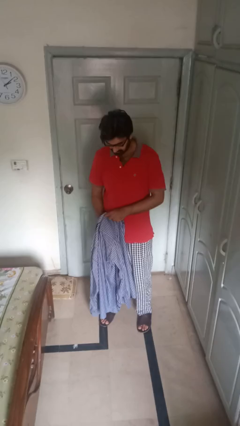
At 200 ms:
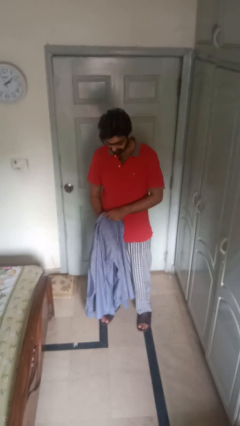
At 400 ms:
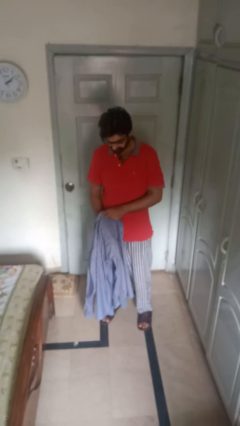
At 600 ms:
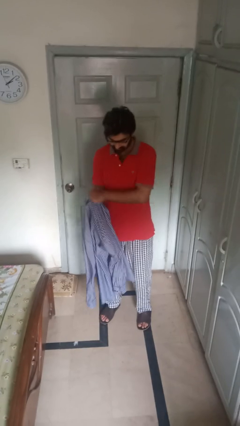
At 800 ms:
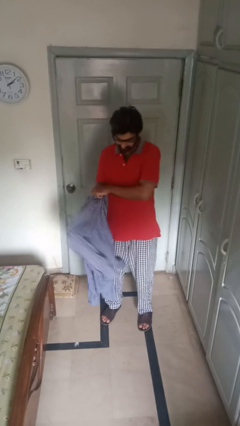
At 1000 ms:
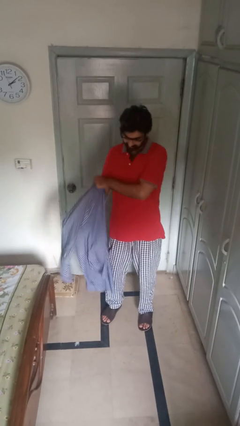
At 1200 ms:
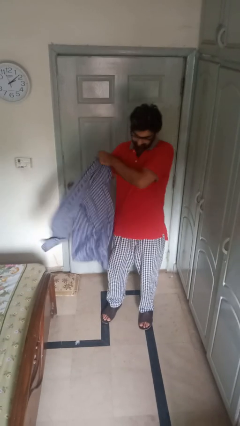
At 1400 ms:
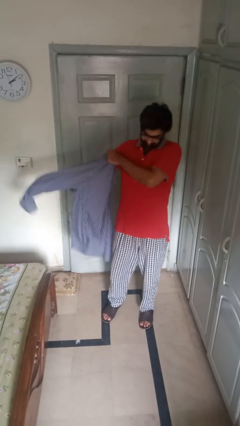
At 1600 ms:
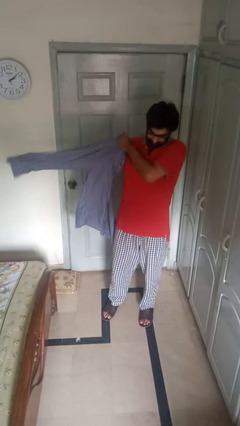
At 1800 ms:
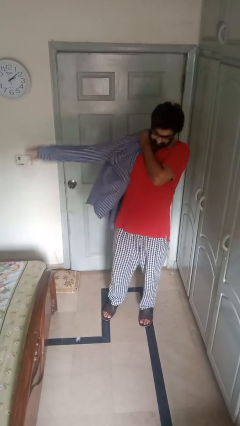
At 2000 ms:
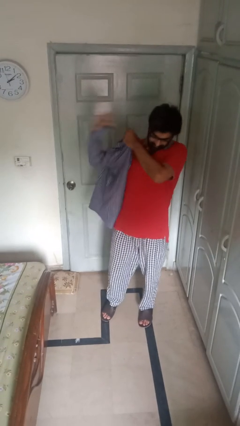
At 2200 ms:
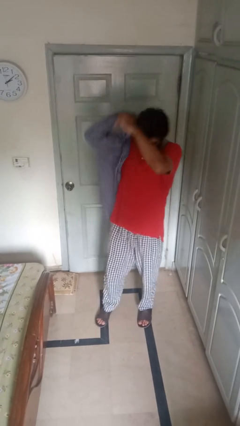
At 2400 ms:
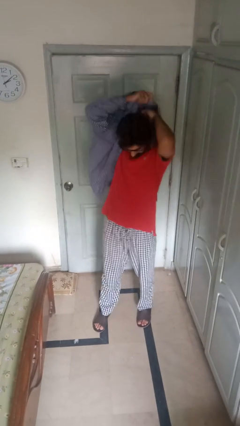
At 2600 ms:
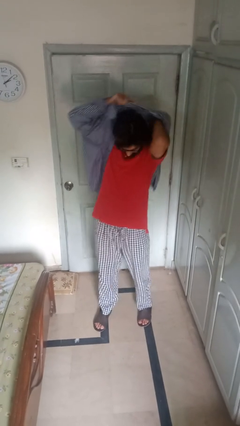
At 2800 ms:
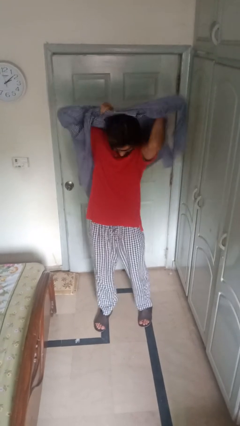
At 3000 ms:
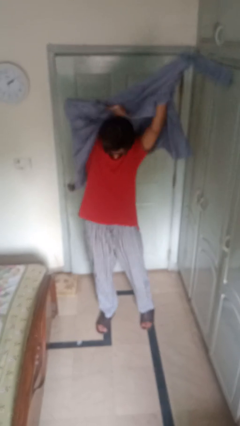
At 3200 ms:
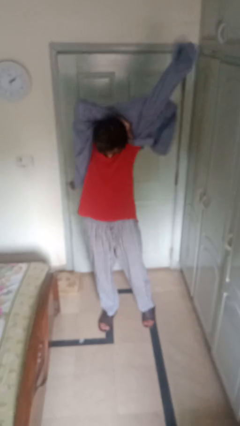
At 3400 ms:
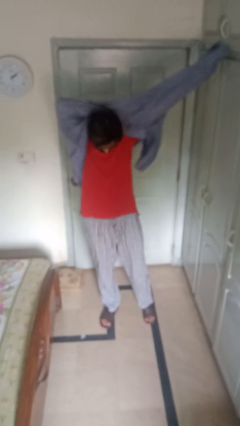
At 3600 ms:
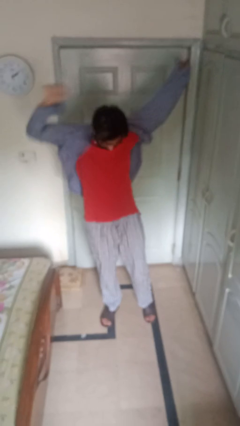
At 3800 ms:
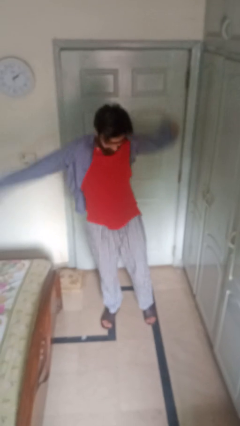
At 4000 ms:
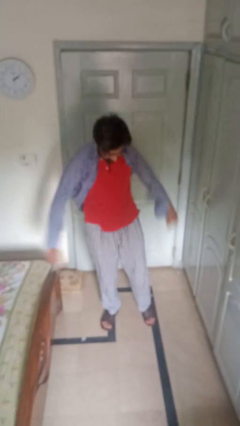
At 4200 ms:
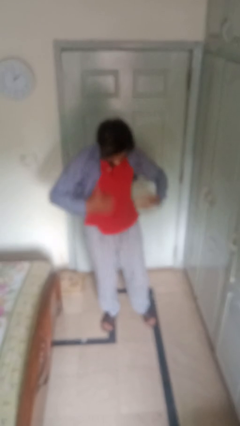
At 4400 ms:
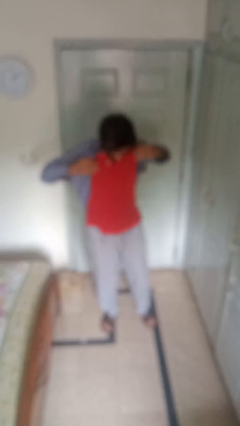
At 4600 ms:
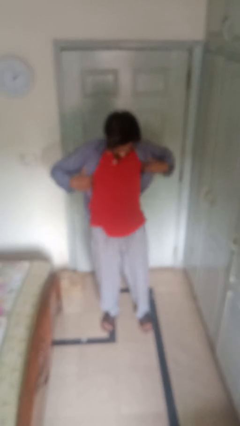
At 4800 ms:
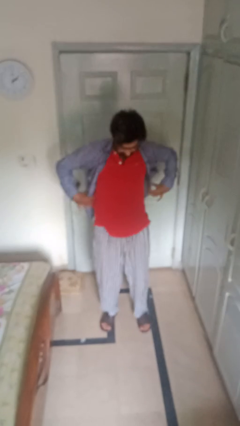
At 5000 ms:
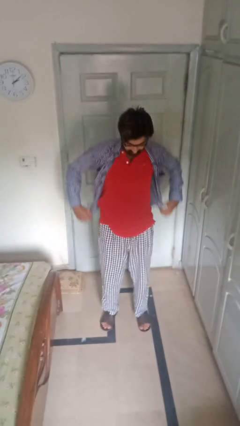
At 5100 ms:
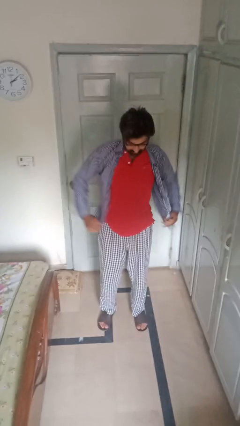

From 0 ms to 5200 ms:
person puts on shirt

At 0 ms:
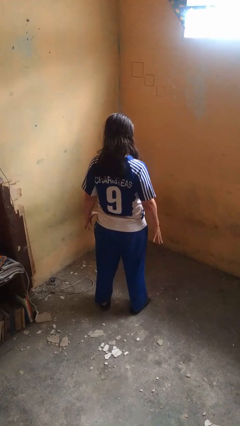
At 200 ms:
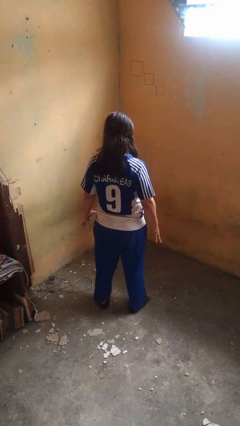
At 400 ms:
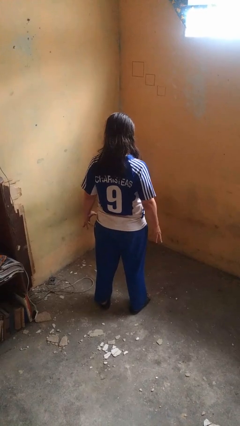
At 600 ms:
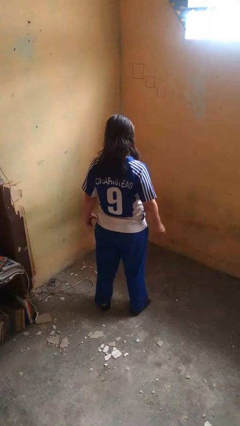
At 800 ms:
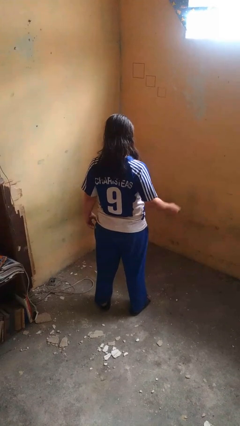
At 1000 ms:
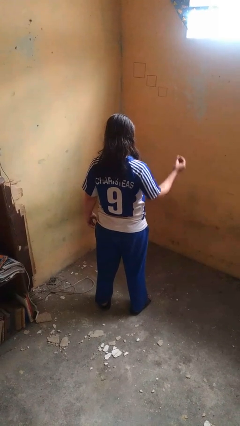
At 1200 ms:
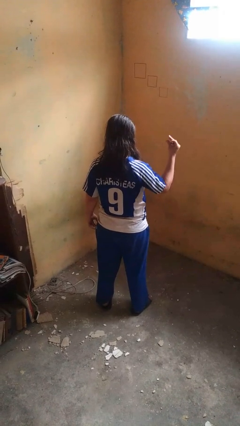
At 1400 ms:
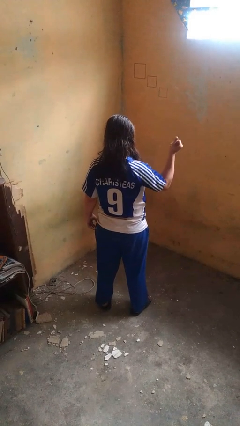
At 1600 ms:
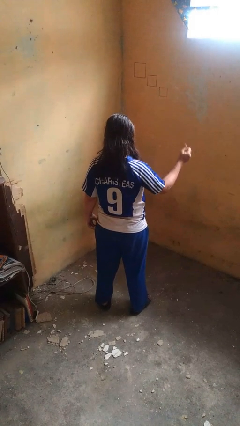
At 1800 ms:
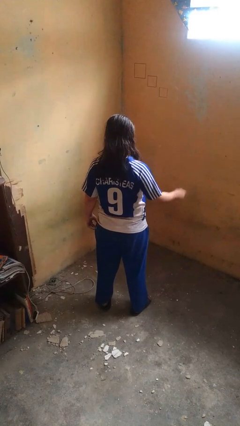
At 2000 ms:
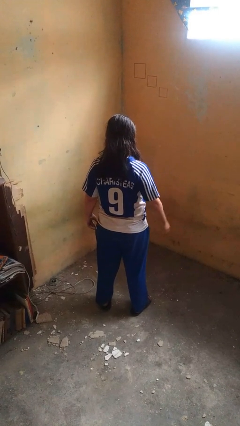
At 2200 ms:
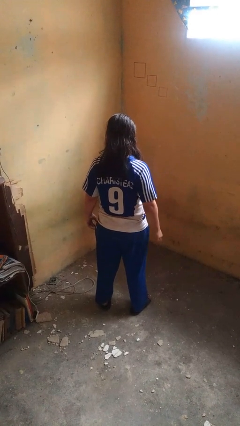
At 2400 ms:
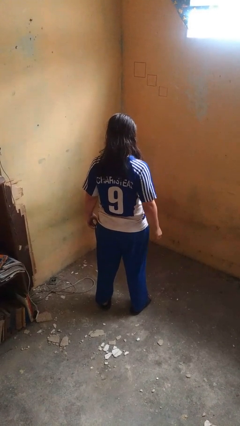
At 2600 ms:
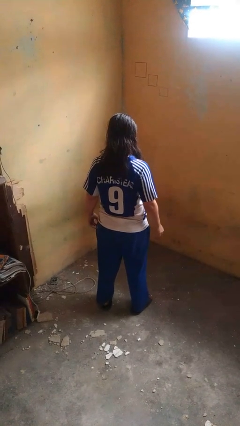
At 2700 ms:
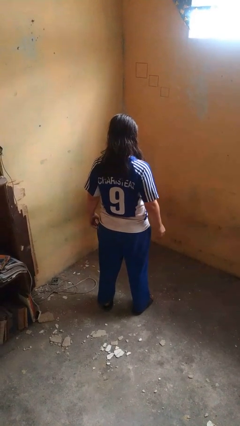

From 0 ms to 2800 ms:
person snaps fingers

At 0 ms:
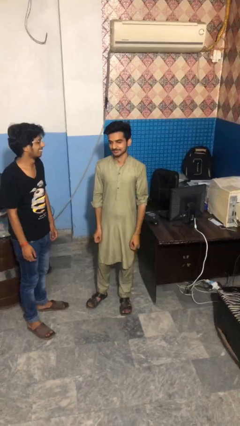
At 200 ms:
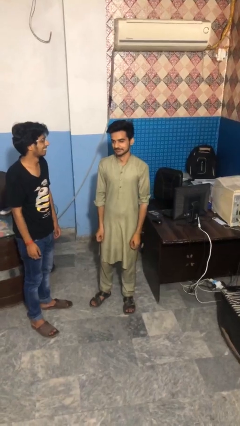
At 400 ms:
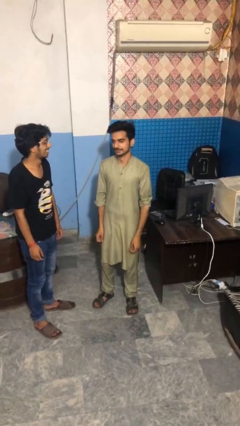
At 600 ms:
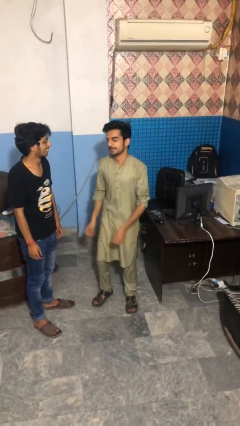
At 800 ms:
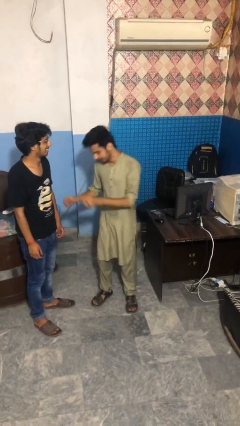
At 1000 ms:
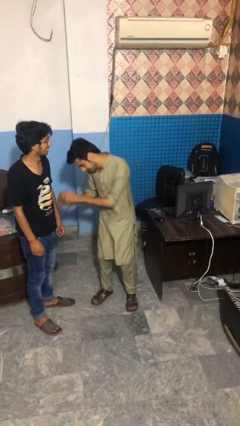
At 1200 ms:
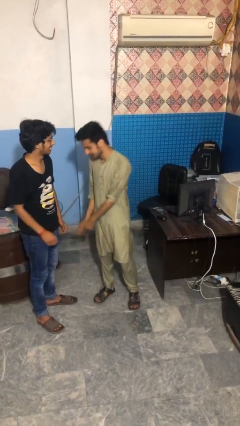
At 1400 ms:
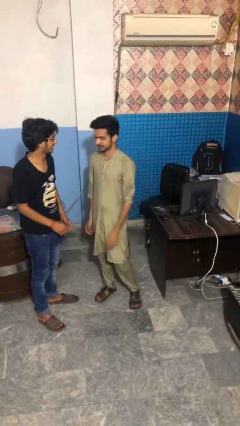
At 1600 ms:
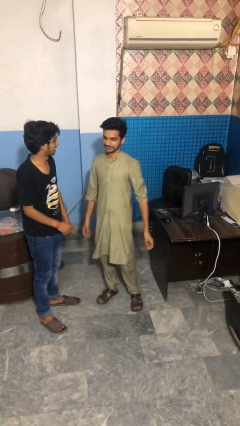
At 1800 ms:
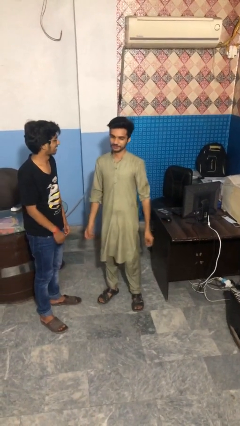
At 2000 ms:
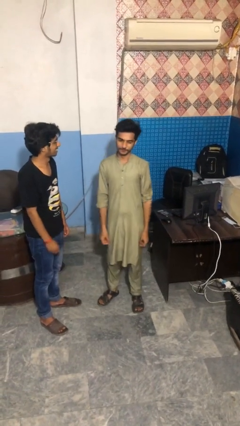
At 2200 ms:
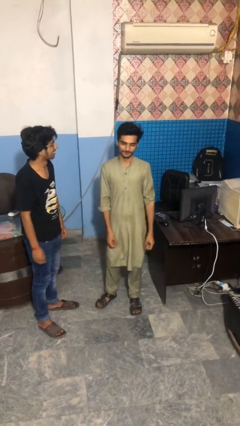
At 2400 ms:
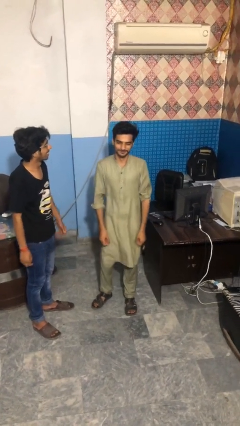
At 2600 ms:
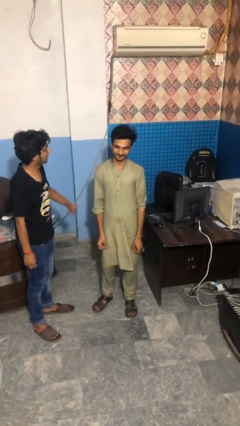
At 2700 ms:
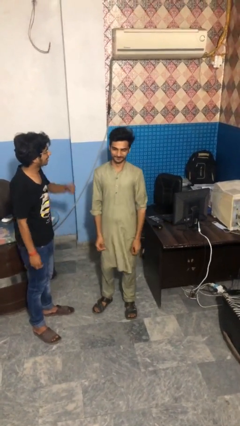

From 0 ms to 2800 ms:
person laughs with person

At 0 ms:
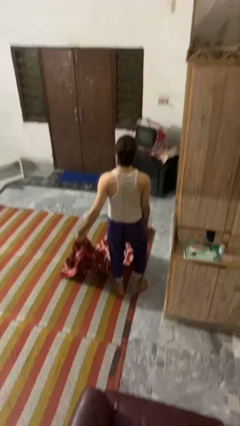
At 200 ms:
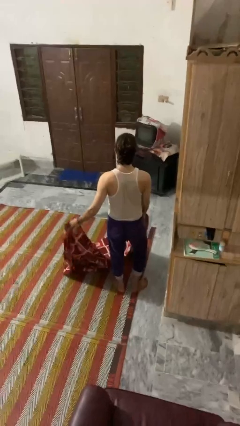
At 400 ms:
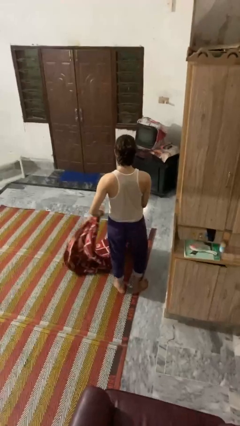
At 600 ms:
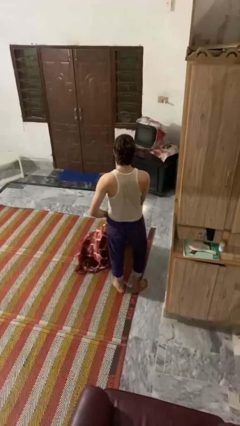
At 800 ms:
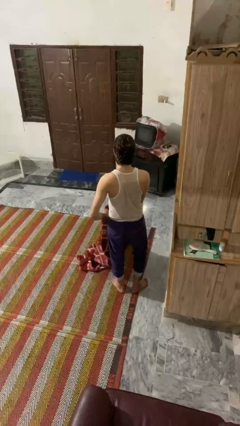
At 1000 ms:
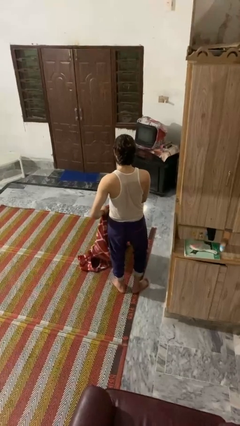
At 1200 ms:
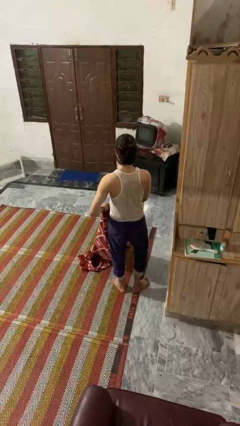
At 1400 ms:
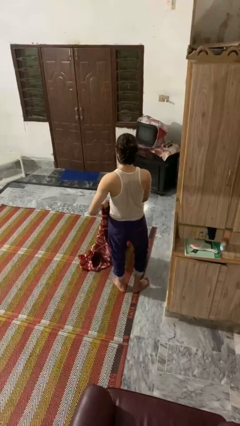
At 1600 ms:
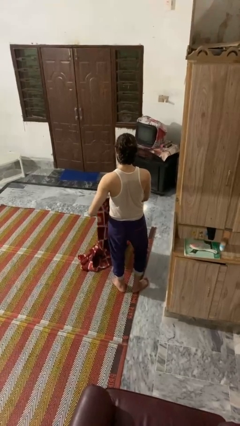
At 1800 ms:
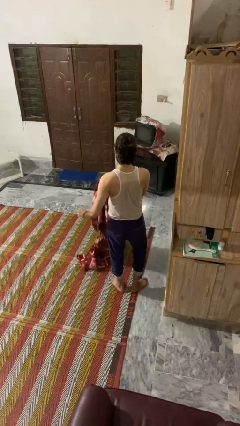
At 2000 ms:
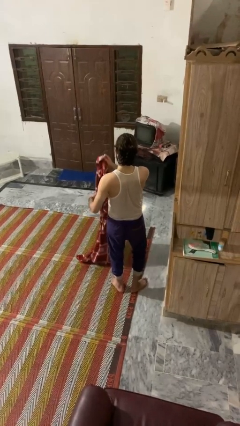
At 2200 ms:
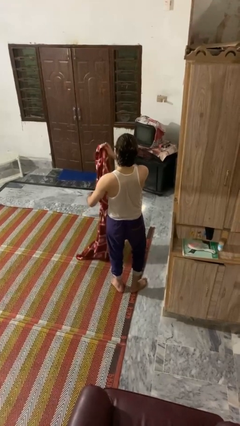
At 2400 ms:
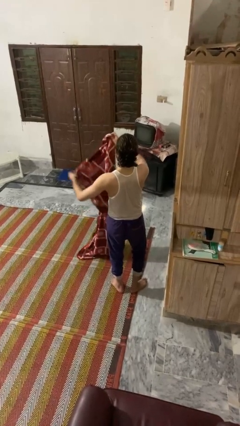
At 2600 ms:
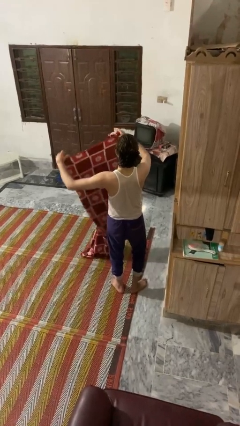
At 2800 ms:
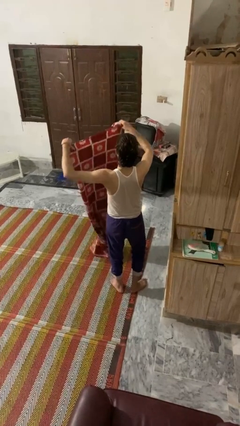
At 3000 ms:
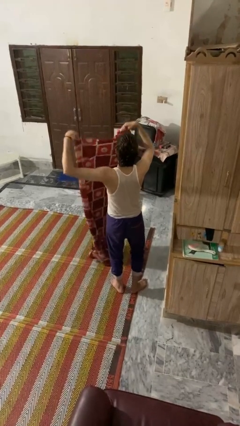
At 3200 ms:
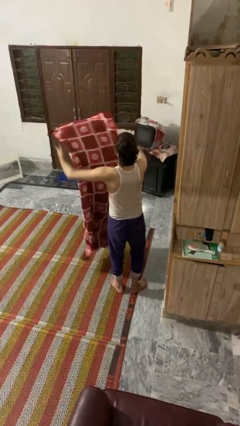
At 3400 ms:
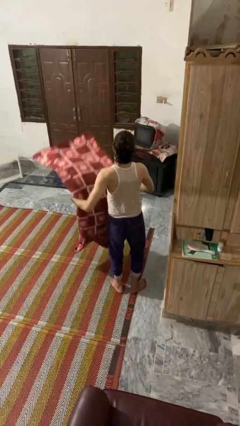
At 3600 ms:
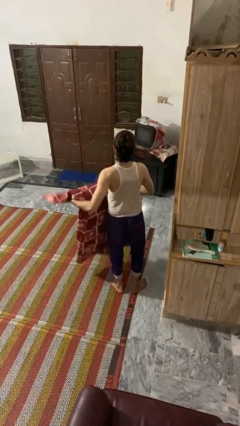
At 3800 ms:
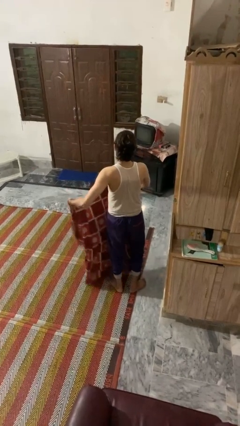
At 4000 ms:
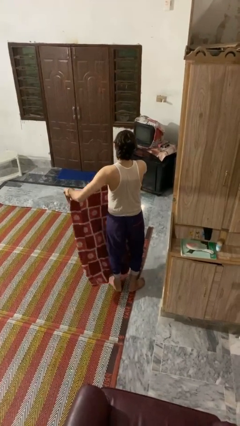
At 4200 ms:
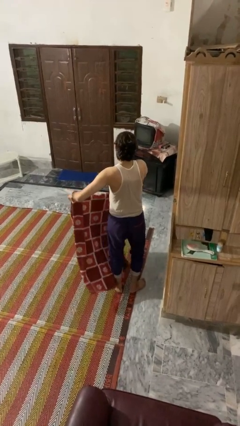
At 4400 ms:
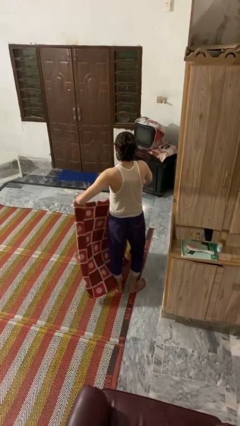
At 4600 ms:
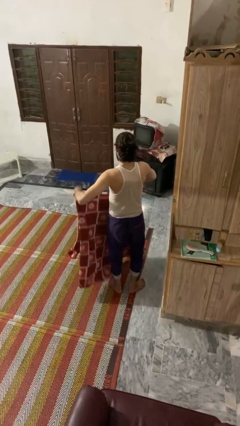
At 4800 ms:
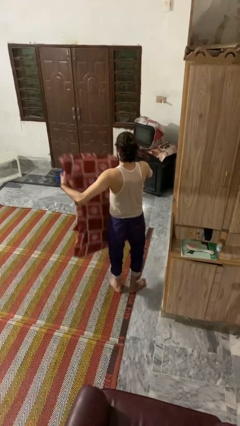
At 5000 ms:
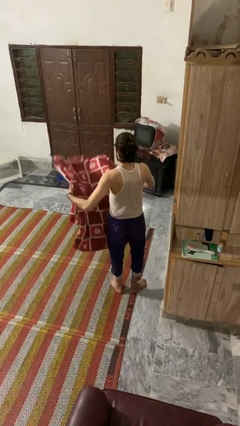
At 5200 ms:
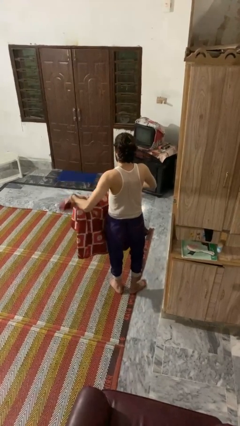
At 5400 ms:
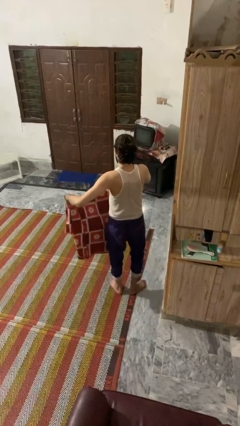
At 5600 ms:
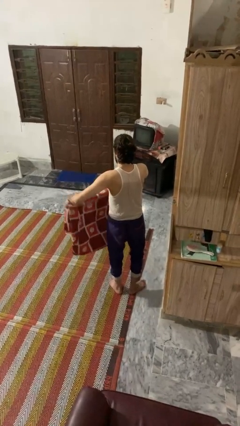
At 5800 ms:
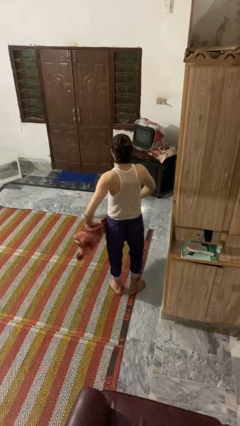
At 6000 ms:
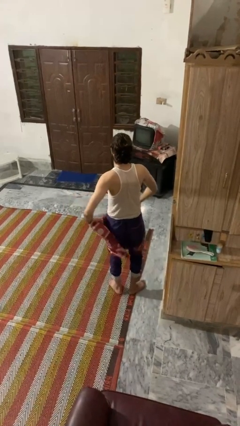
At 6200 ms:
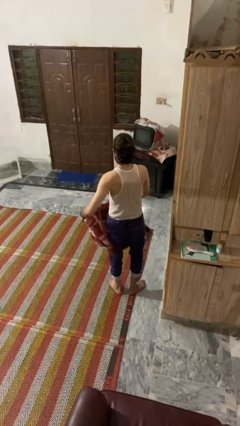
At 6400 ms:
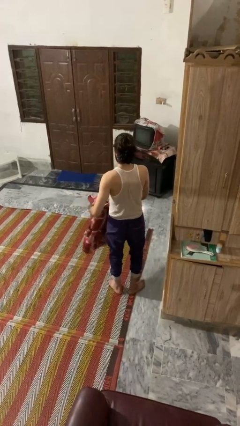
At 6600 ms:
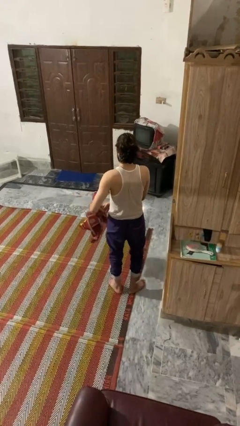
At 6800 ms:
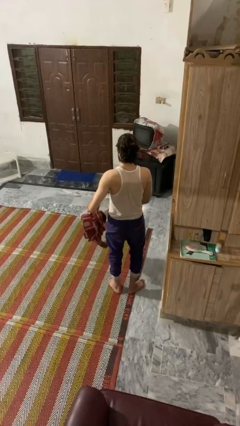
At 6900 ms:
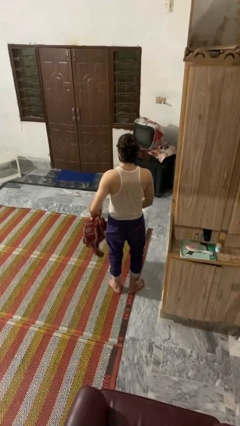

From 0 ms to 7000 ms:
person folds blanket
